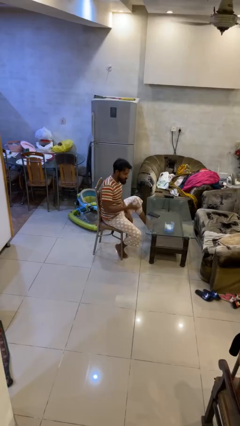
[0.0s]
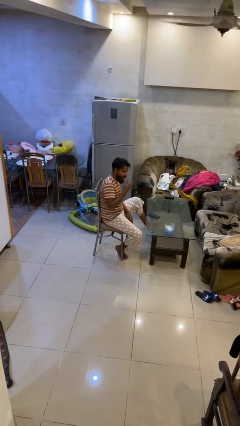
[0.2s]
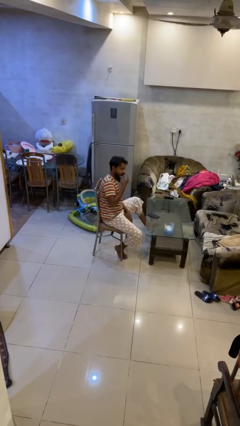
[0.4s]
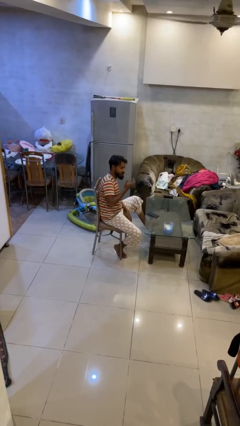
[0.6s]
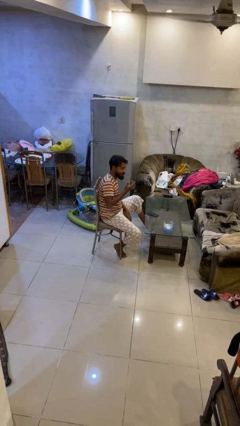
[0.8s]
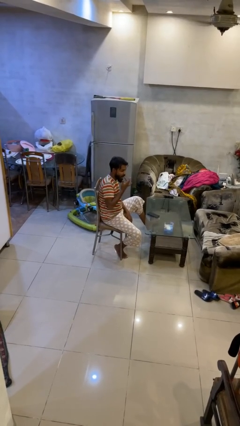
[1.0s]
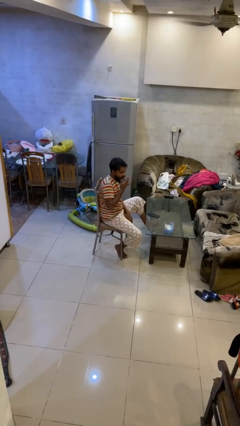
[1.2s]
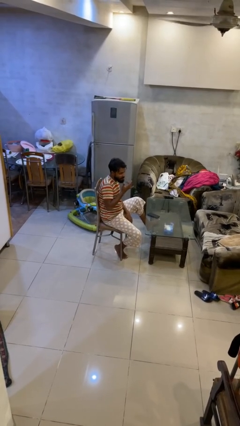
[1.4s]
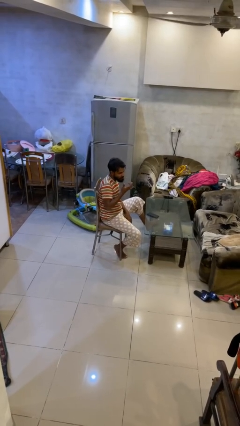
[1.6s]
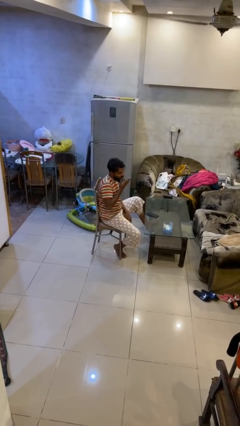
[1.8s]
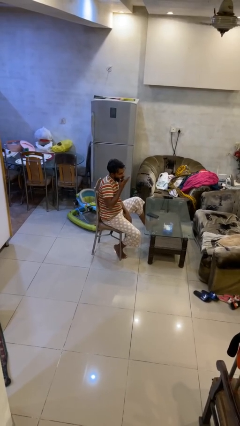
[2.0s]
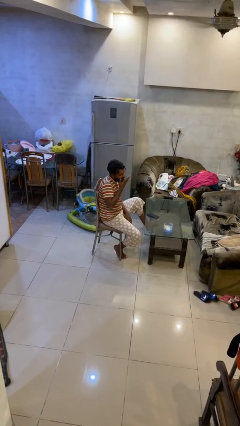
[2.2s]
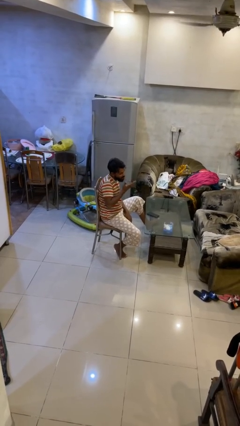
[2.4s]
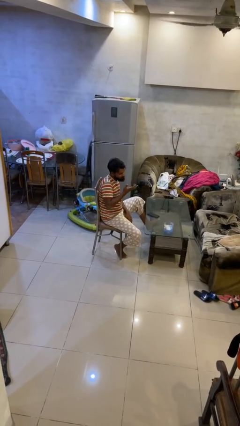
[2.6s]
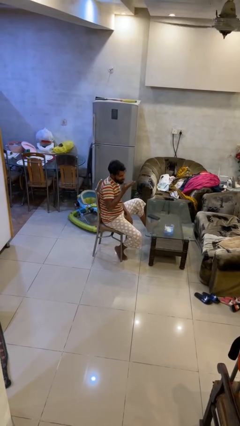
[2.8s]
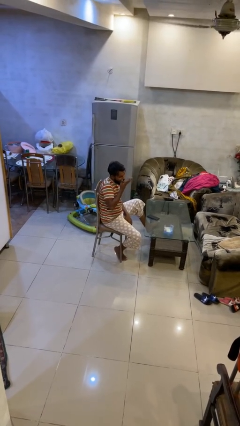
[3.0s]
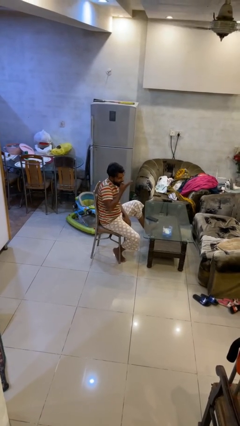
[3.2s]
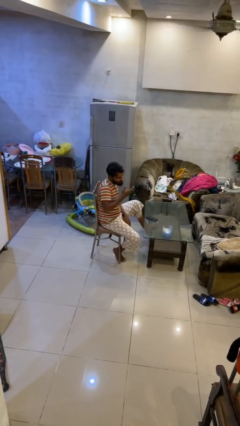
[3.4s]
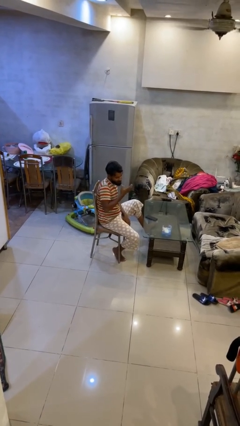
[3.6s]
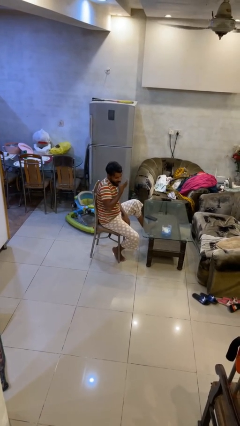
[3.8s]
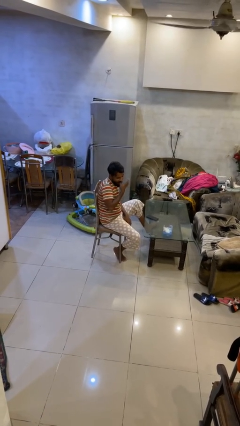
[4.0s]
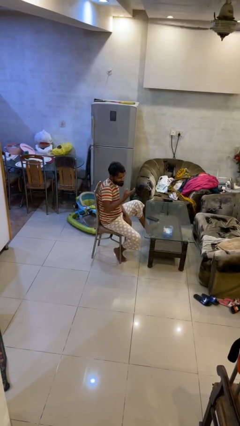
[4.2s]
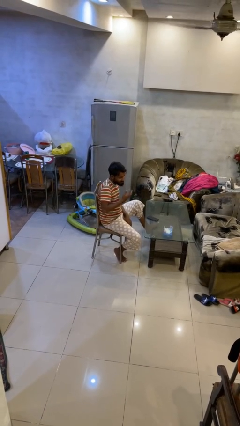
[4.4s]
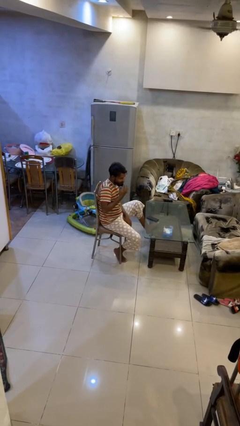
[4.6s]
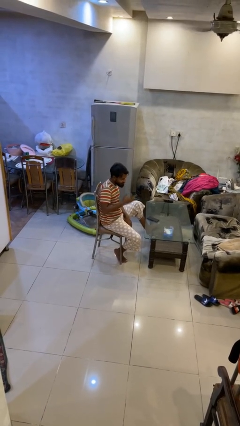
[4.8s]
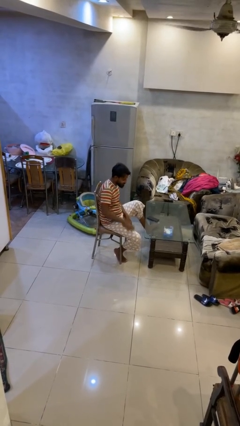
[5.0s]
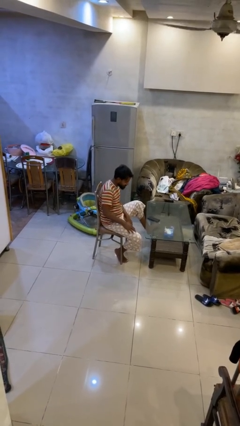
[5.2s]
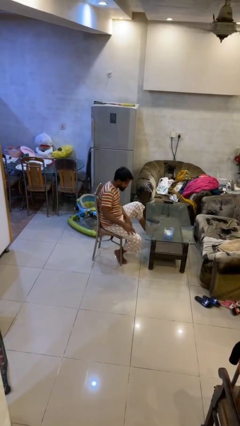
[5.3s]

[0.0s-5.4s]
person licks fingers

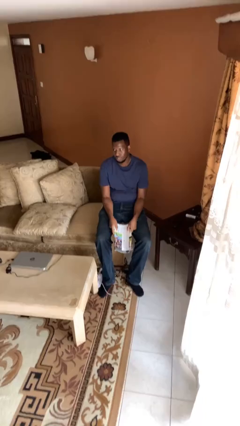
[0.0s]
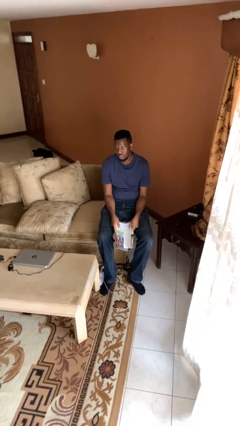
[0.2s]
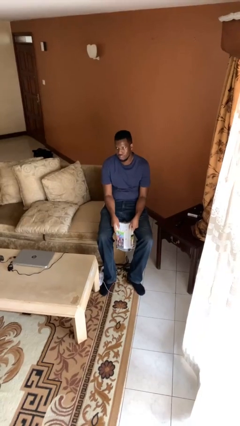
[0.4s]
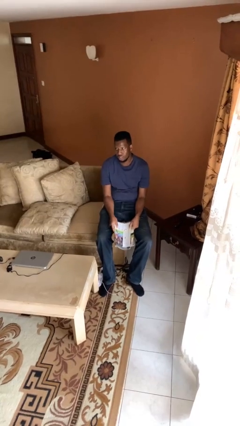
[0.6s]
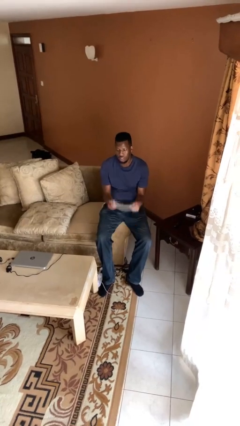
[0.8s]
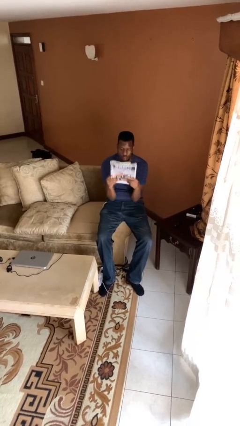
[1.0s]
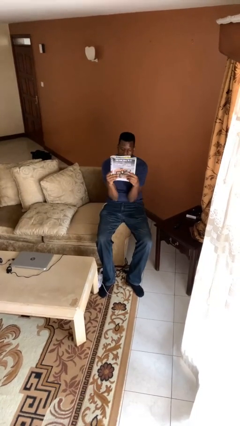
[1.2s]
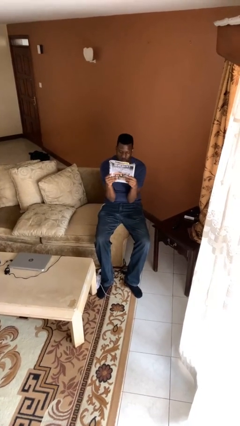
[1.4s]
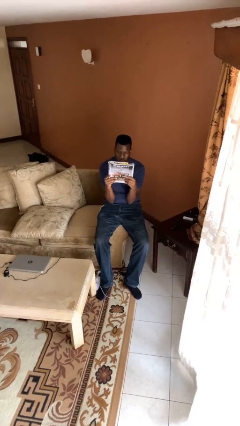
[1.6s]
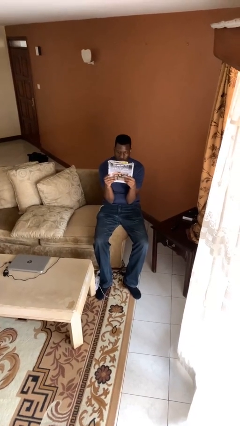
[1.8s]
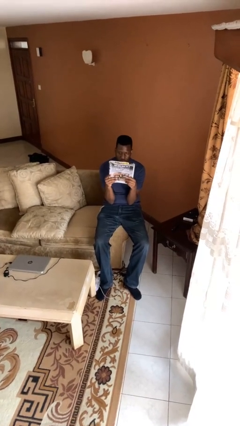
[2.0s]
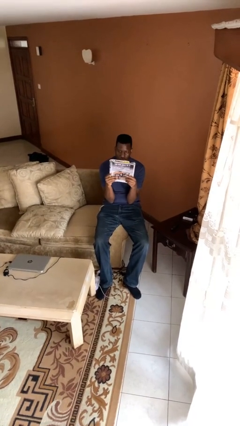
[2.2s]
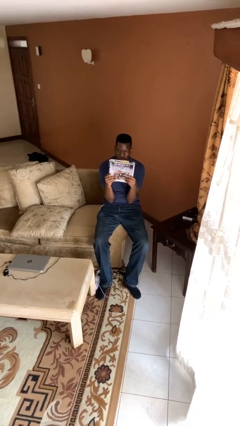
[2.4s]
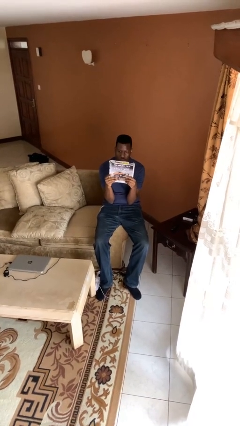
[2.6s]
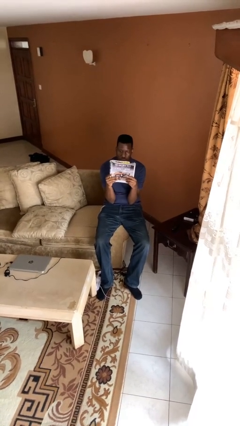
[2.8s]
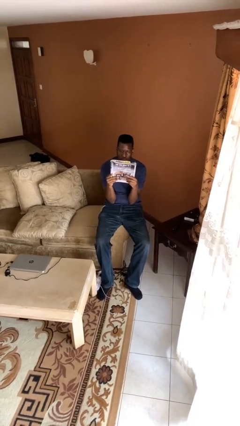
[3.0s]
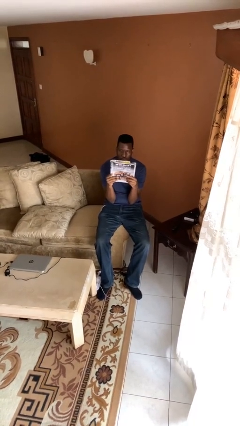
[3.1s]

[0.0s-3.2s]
person reads document

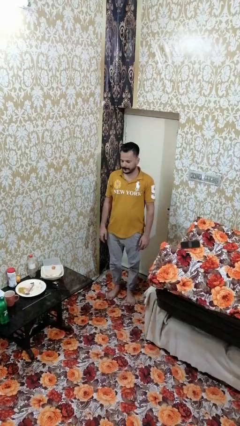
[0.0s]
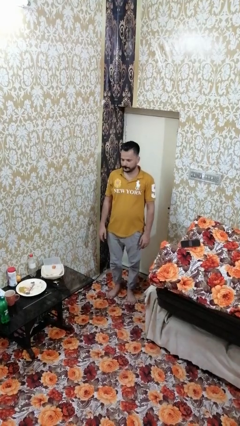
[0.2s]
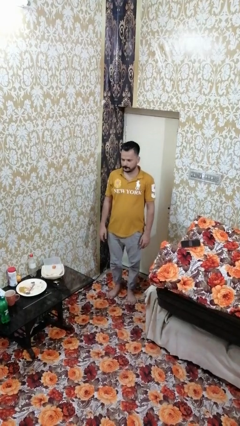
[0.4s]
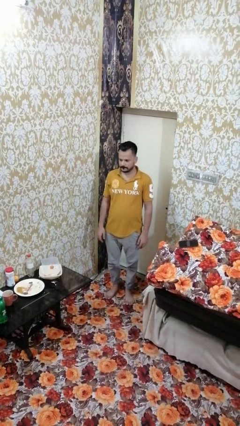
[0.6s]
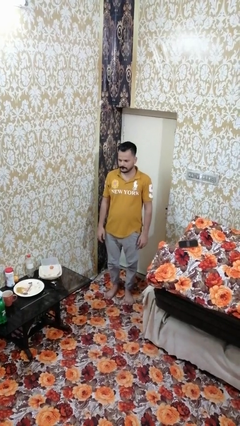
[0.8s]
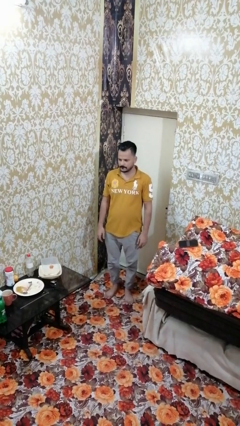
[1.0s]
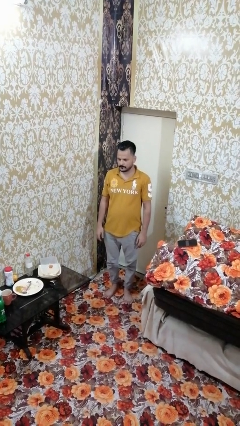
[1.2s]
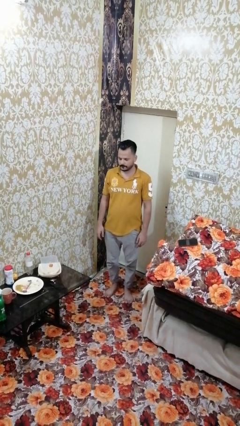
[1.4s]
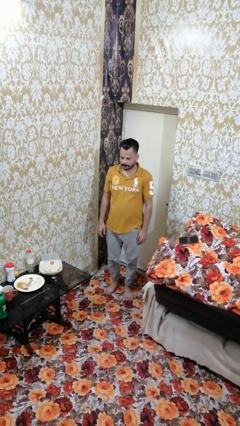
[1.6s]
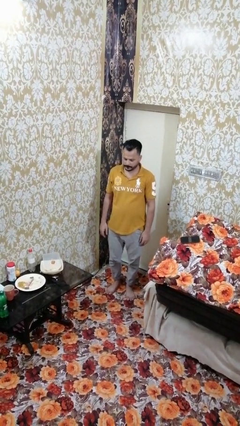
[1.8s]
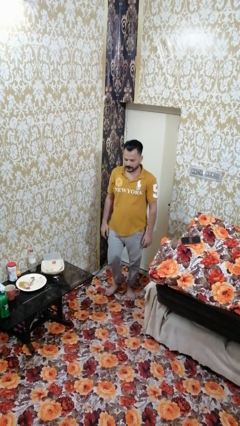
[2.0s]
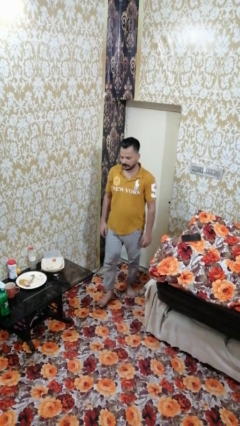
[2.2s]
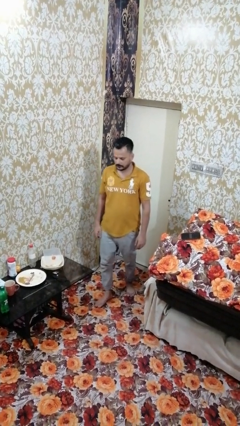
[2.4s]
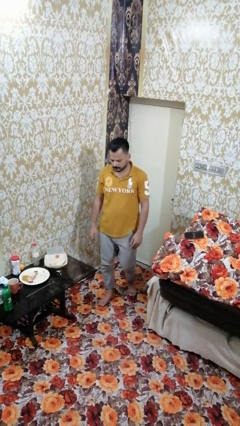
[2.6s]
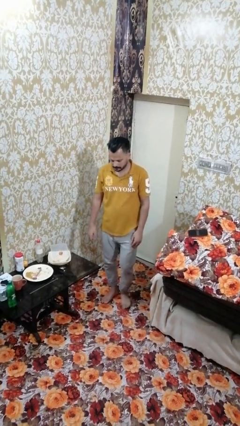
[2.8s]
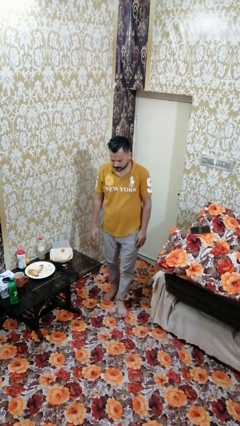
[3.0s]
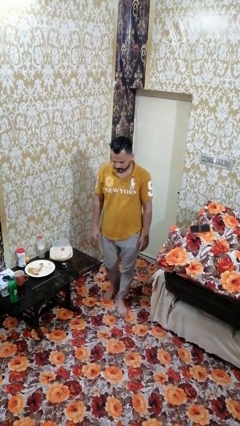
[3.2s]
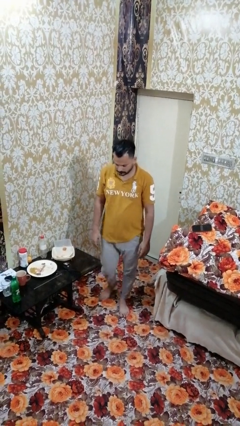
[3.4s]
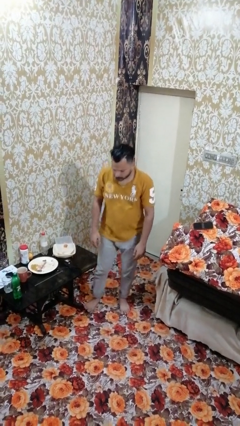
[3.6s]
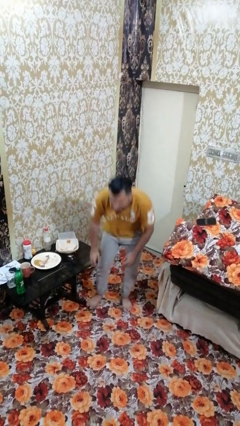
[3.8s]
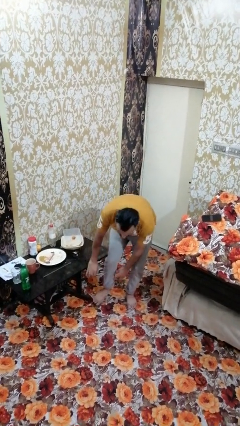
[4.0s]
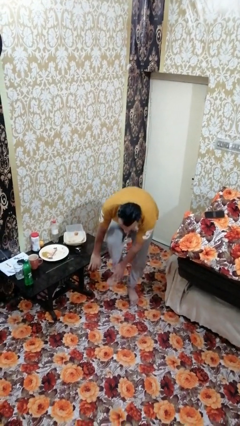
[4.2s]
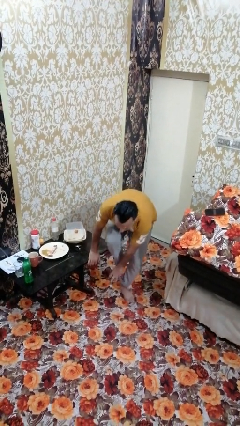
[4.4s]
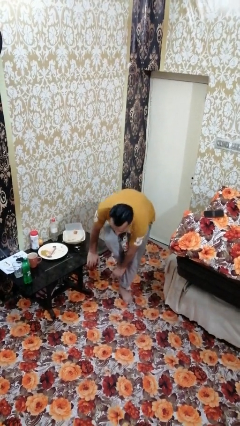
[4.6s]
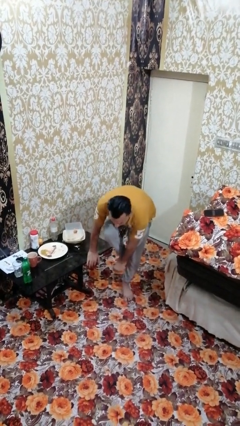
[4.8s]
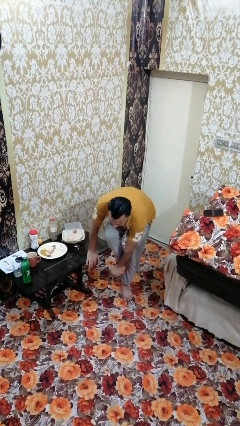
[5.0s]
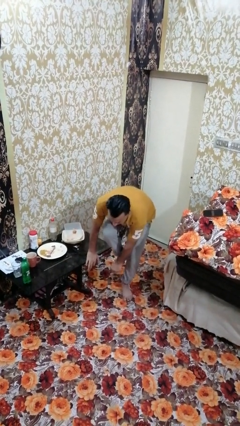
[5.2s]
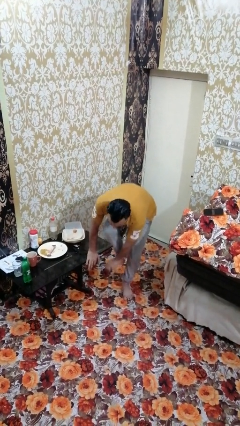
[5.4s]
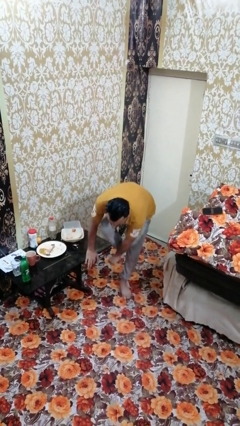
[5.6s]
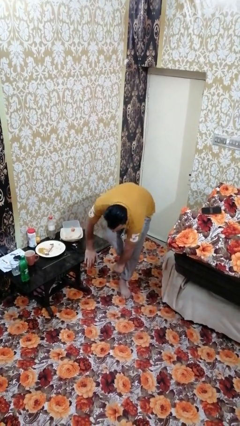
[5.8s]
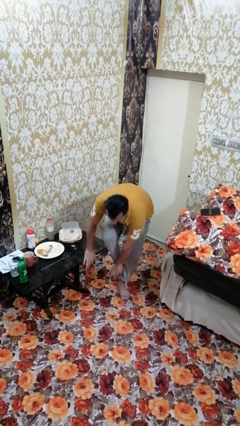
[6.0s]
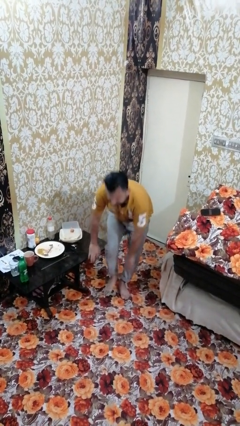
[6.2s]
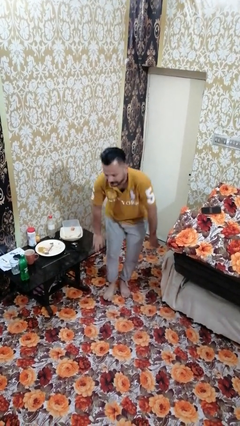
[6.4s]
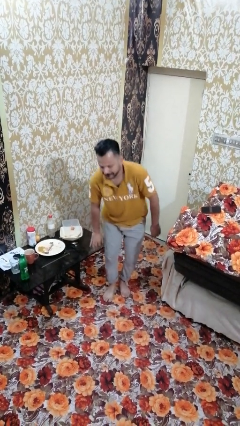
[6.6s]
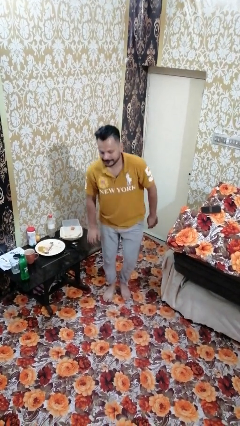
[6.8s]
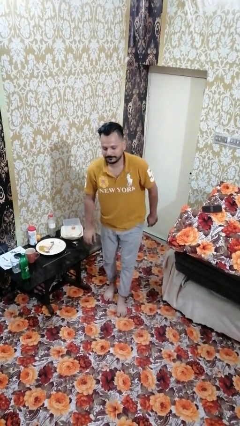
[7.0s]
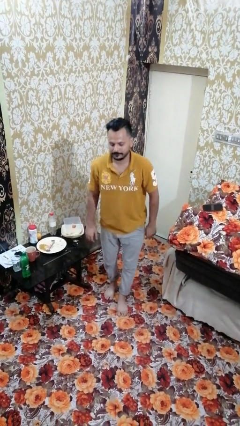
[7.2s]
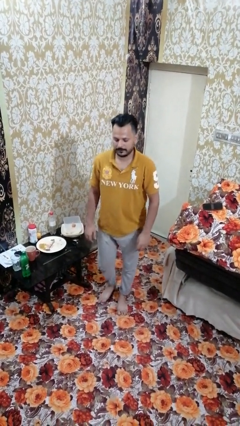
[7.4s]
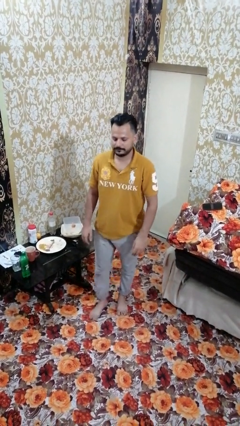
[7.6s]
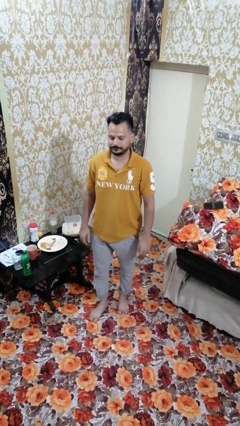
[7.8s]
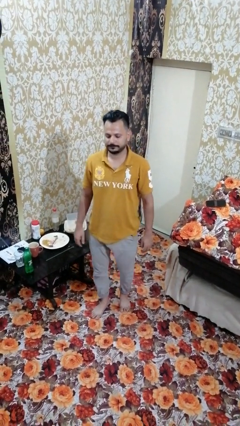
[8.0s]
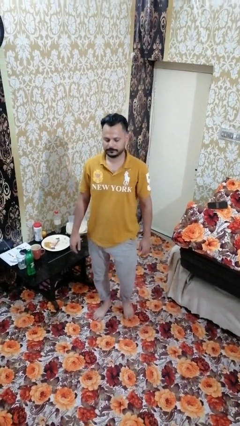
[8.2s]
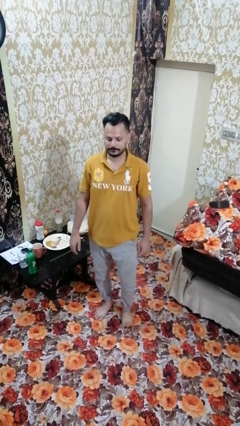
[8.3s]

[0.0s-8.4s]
person bumps into table

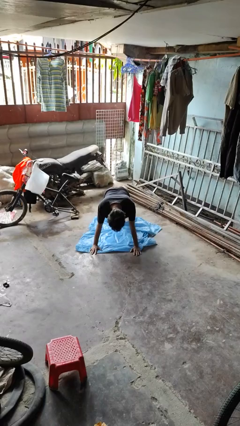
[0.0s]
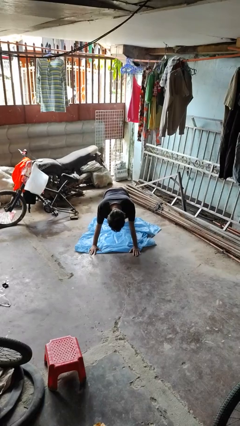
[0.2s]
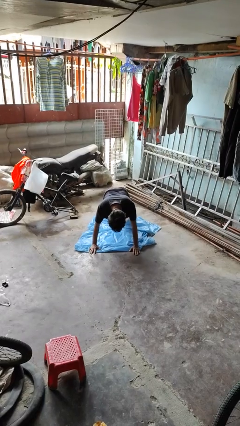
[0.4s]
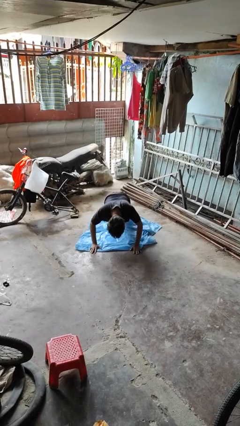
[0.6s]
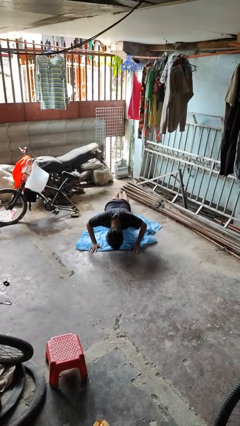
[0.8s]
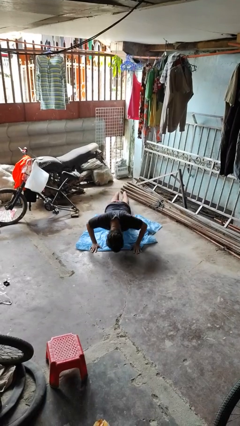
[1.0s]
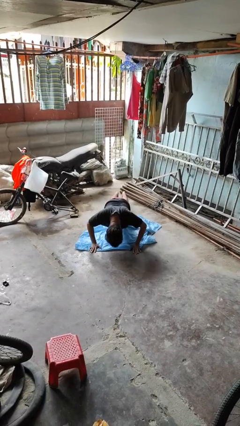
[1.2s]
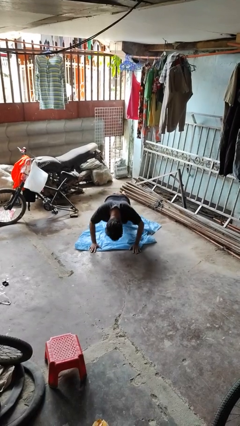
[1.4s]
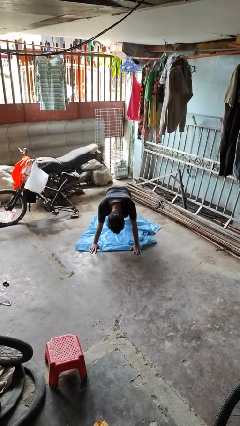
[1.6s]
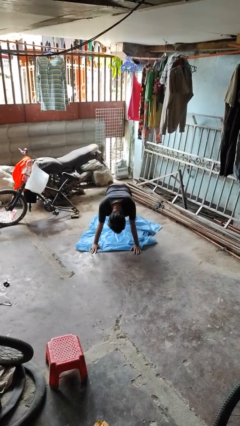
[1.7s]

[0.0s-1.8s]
person exercises with pushup
